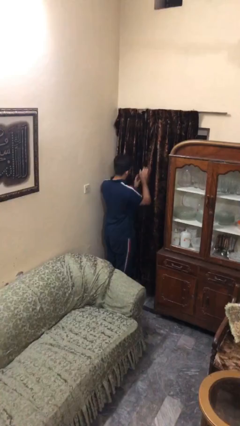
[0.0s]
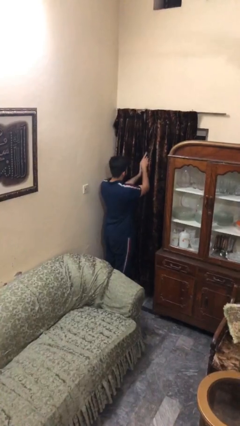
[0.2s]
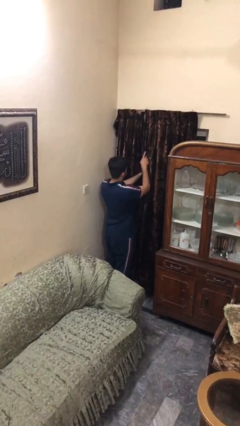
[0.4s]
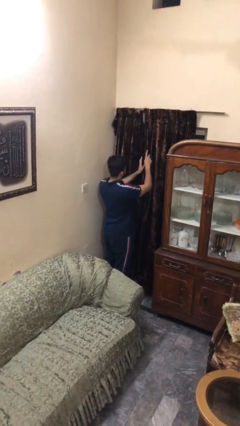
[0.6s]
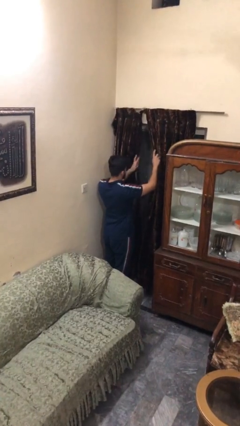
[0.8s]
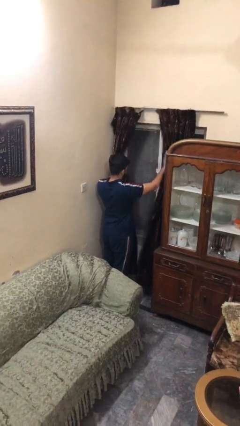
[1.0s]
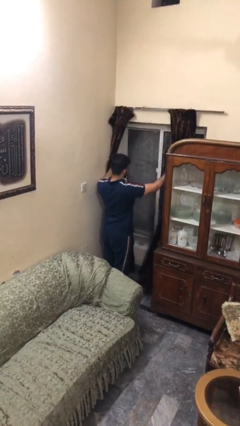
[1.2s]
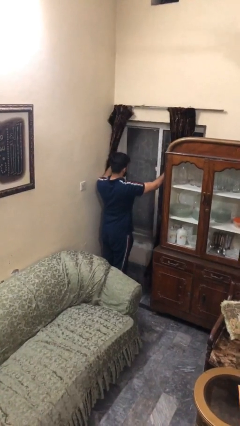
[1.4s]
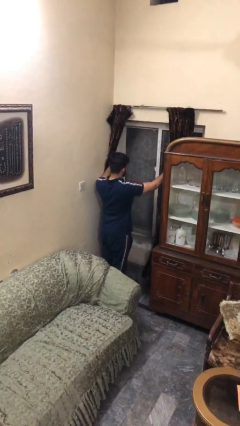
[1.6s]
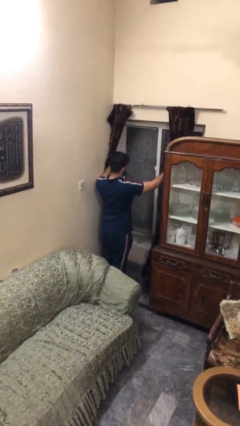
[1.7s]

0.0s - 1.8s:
person opens curtains

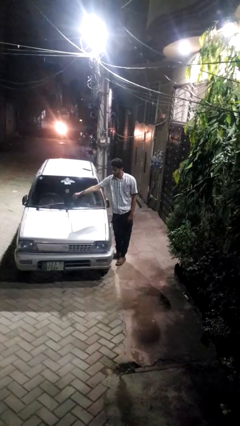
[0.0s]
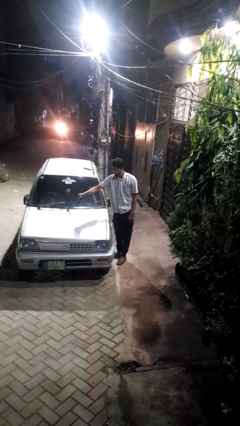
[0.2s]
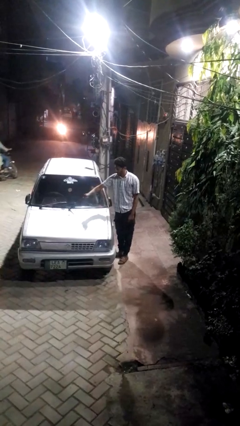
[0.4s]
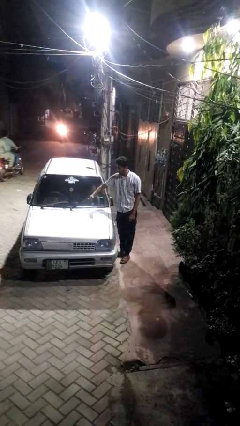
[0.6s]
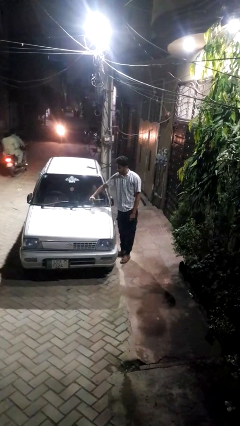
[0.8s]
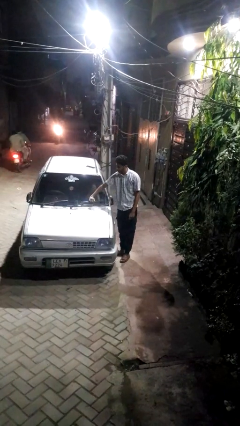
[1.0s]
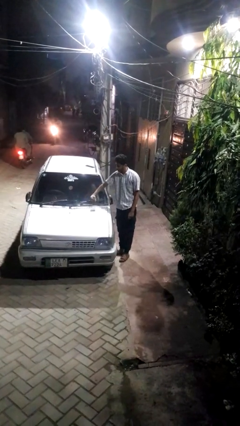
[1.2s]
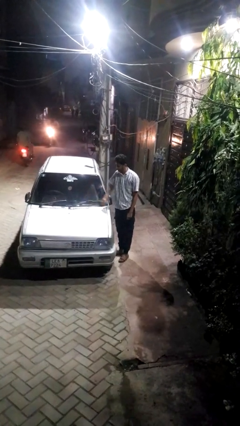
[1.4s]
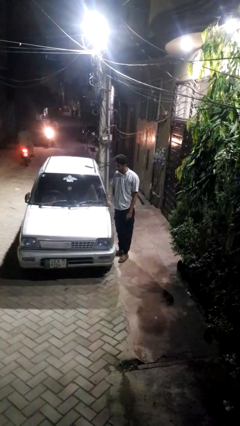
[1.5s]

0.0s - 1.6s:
person flips down car wipers

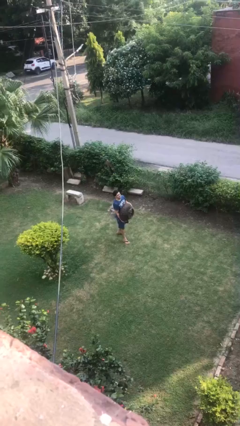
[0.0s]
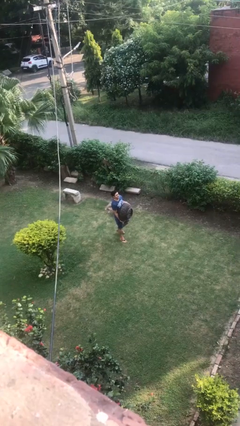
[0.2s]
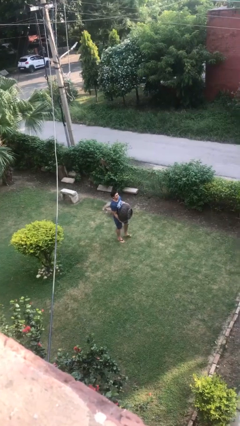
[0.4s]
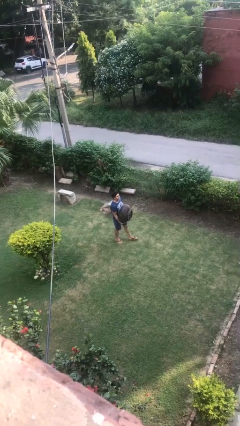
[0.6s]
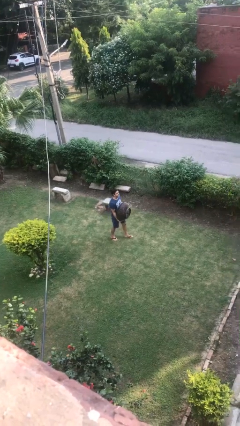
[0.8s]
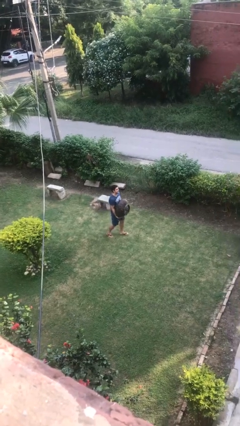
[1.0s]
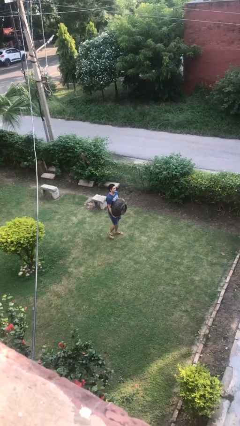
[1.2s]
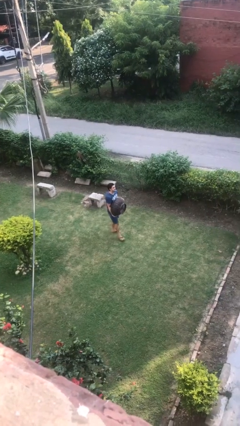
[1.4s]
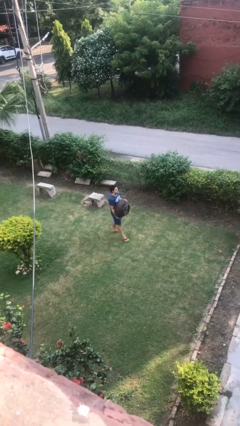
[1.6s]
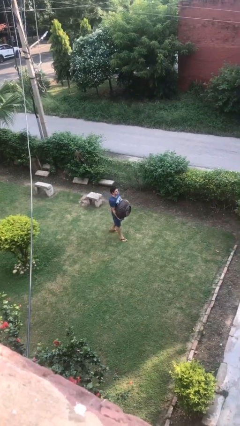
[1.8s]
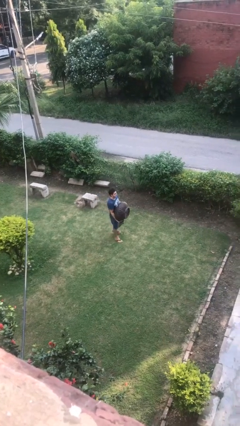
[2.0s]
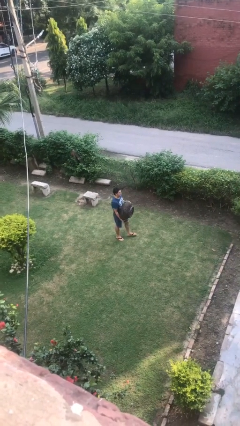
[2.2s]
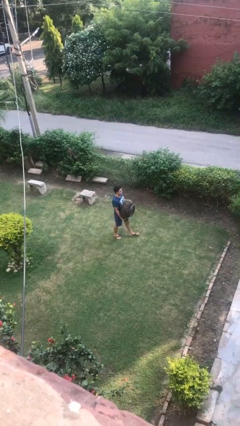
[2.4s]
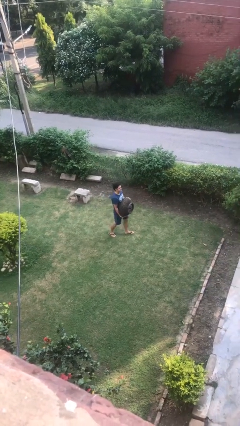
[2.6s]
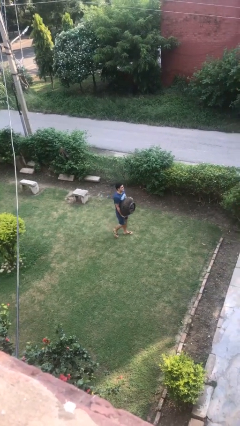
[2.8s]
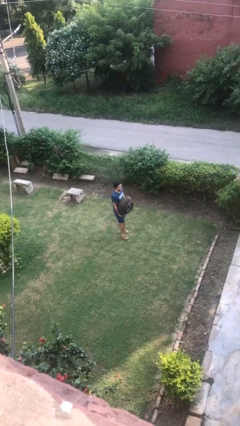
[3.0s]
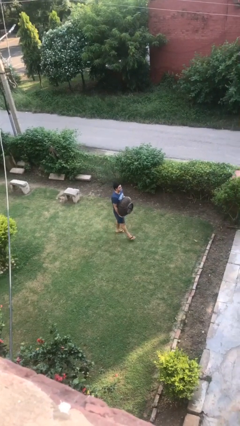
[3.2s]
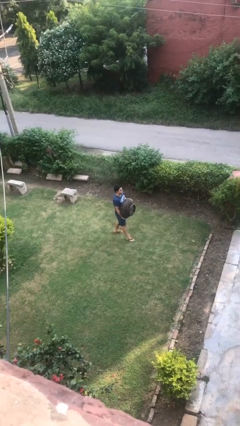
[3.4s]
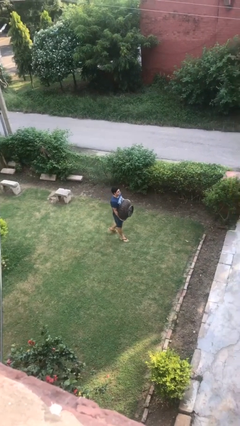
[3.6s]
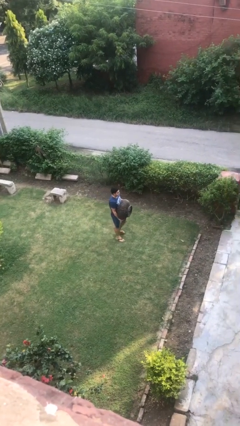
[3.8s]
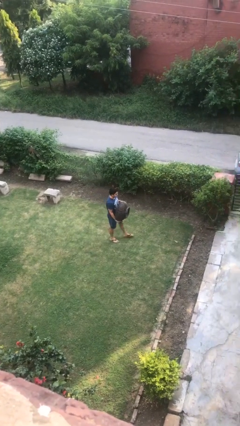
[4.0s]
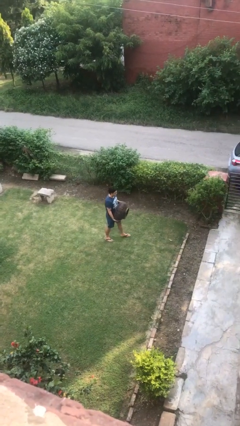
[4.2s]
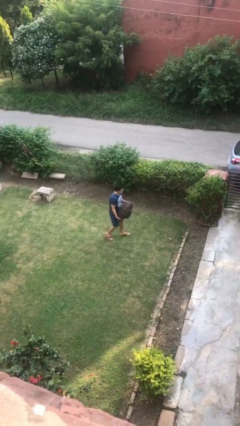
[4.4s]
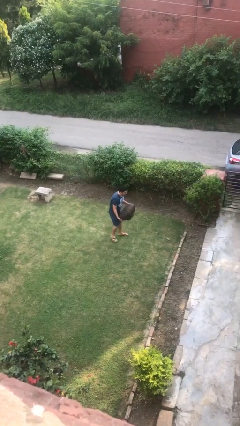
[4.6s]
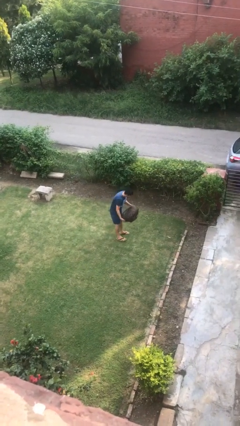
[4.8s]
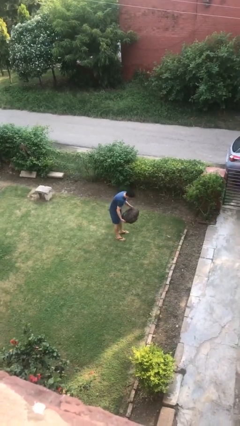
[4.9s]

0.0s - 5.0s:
person carries heavy object

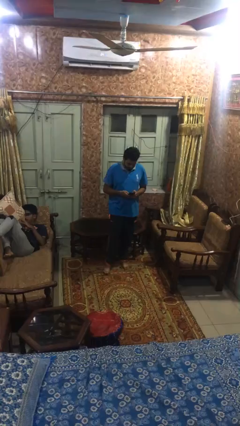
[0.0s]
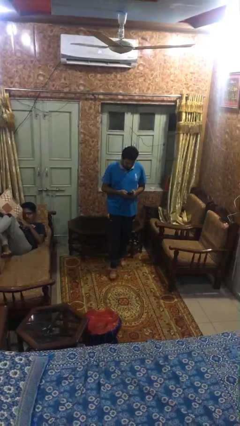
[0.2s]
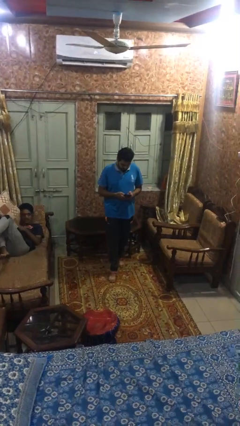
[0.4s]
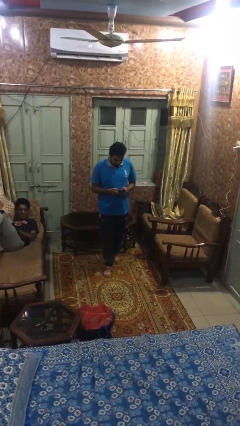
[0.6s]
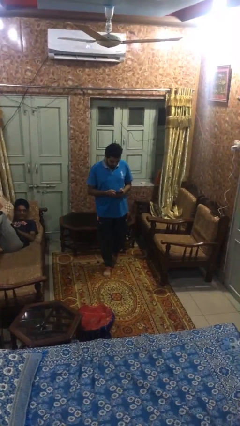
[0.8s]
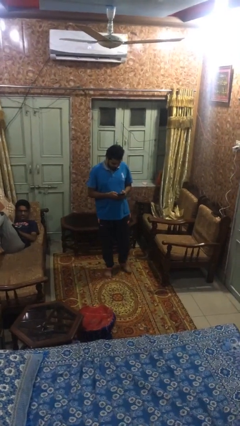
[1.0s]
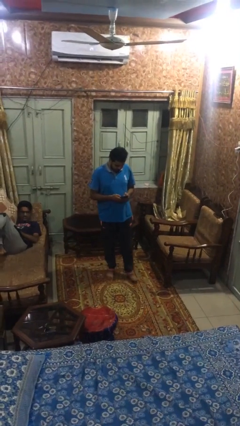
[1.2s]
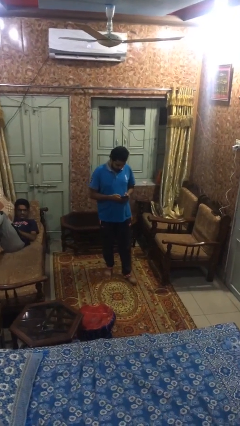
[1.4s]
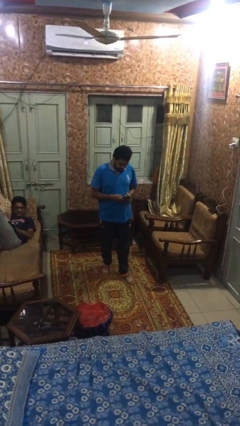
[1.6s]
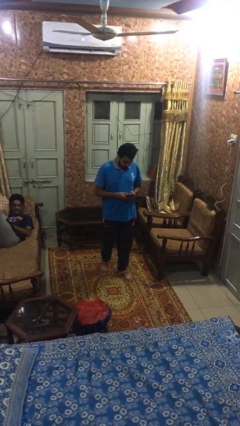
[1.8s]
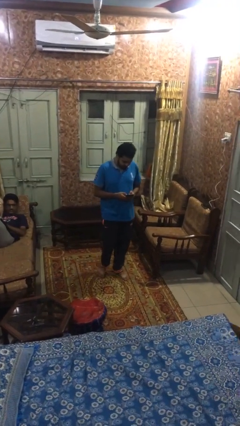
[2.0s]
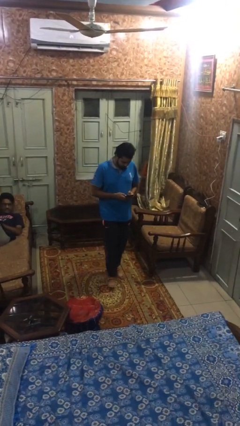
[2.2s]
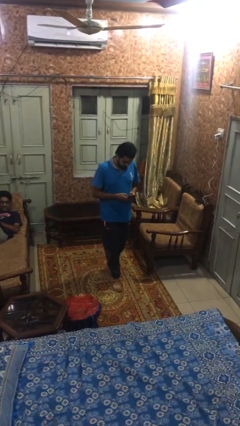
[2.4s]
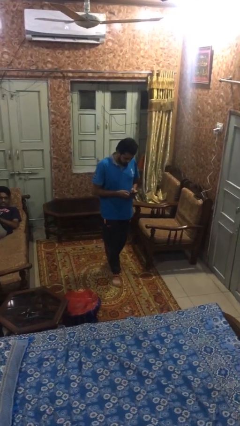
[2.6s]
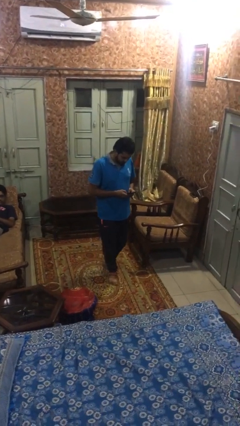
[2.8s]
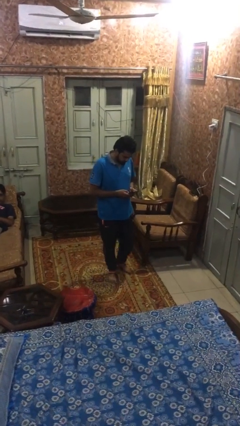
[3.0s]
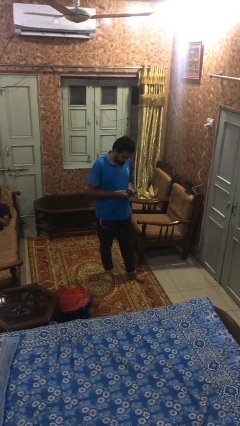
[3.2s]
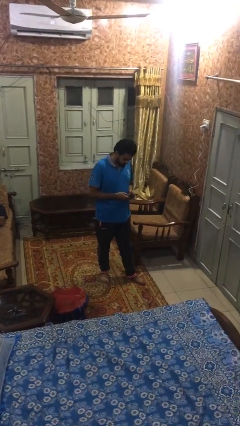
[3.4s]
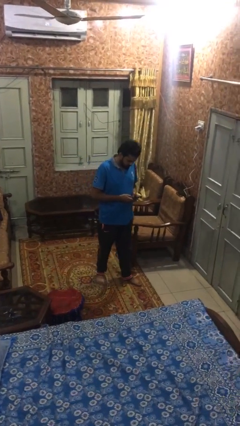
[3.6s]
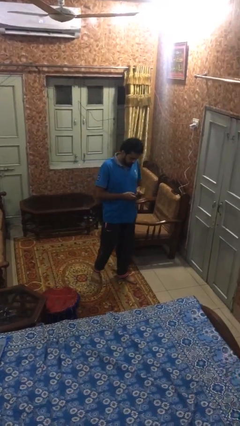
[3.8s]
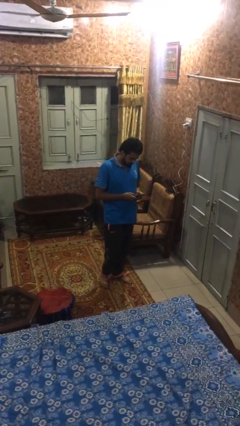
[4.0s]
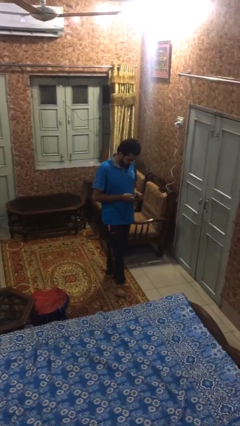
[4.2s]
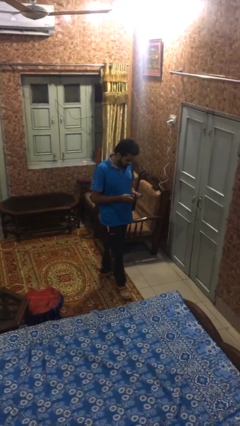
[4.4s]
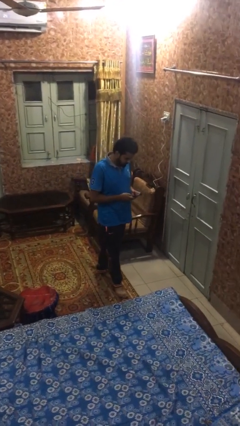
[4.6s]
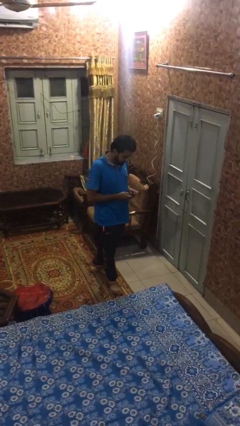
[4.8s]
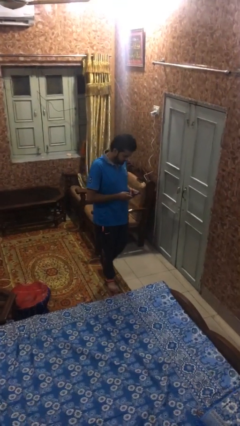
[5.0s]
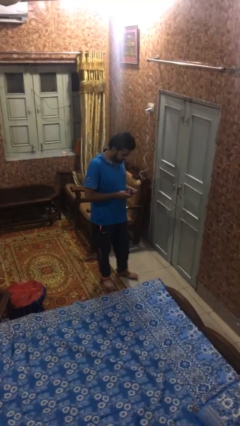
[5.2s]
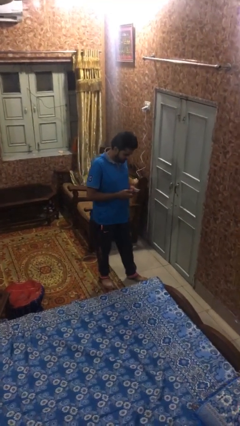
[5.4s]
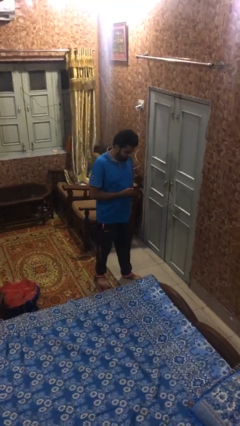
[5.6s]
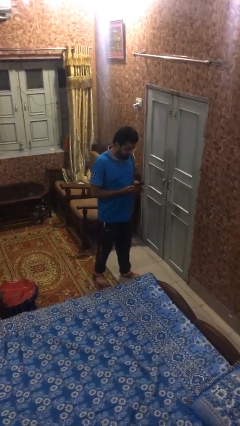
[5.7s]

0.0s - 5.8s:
person texts on phone

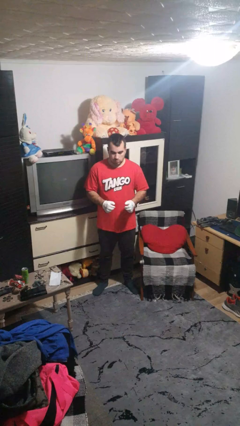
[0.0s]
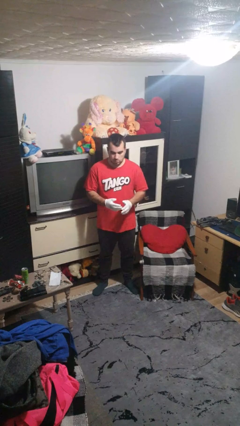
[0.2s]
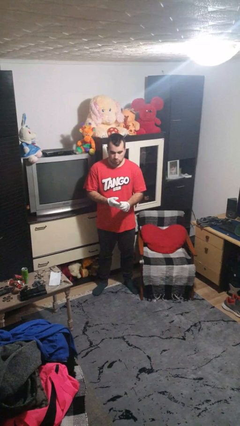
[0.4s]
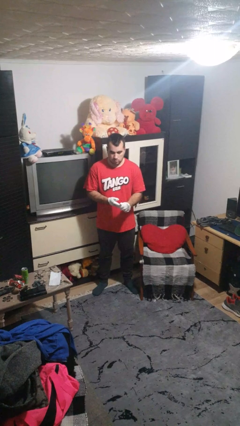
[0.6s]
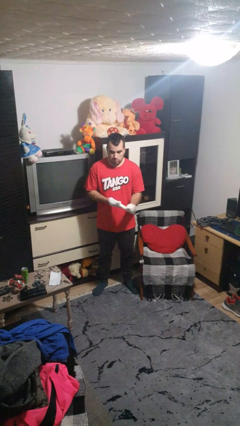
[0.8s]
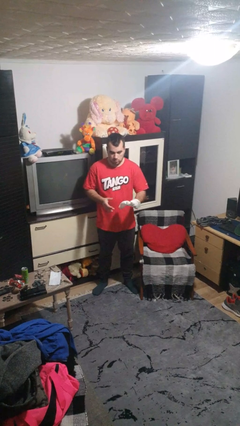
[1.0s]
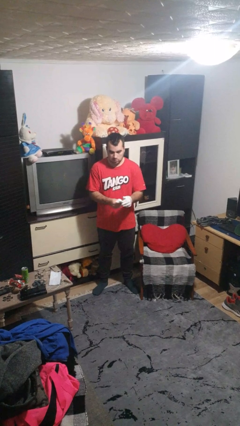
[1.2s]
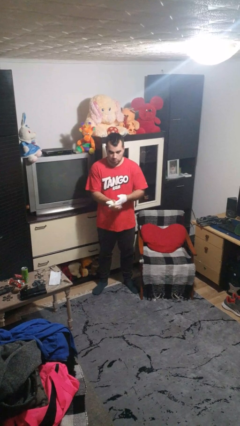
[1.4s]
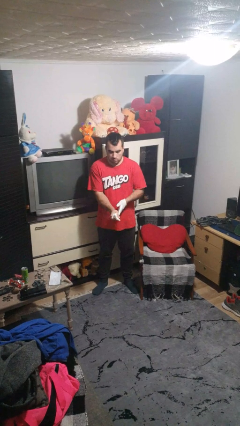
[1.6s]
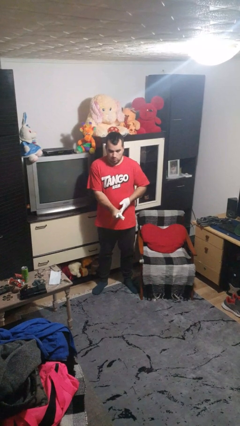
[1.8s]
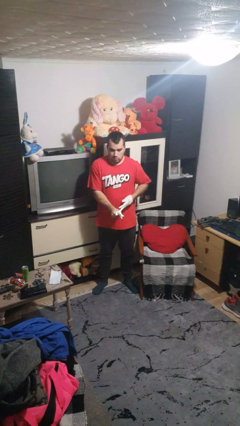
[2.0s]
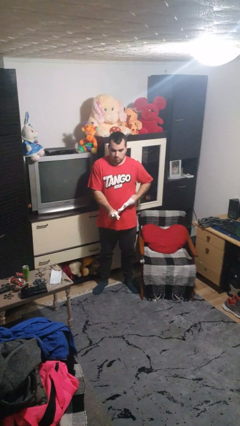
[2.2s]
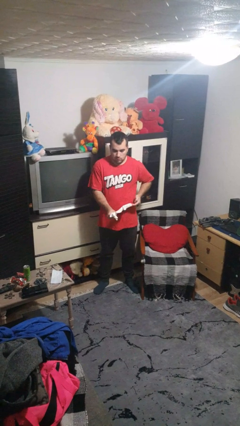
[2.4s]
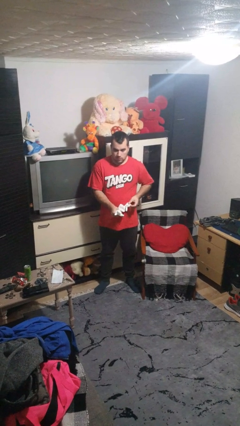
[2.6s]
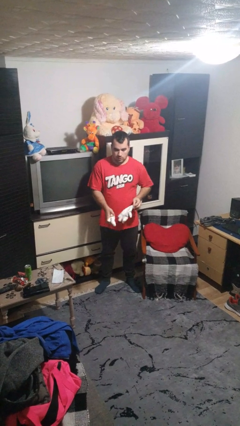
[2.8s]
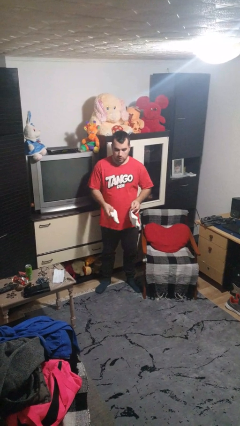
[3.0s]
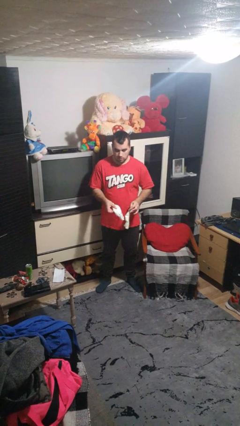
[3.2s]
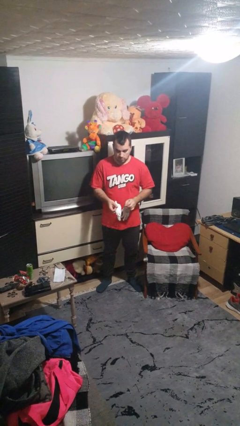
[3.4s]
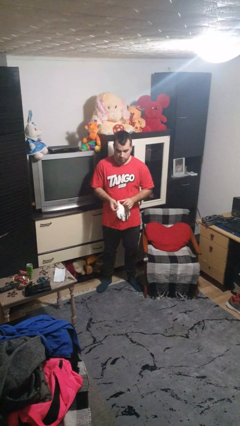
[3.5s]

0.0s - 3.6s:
person takes off gloves
